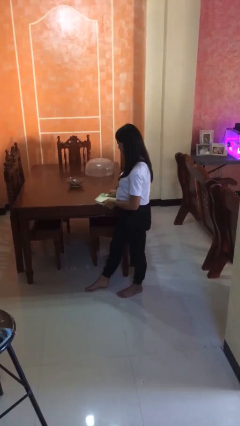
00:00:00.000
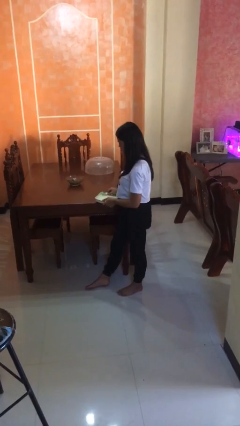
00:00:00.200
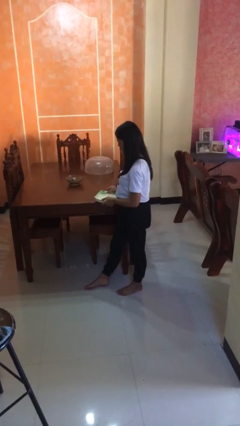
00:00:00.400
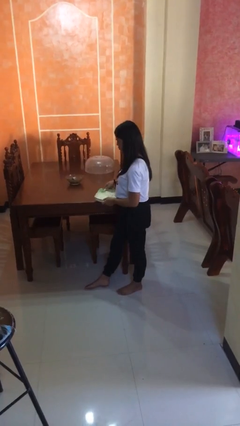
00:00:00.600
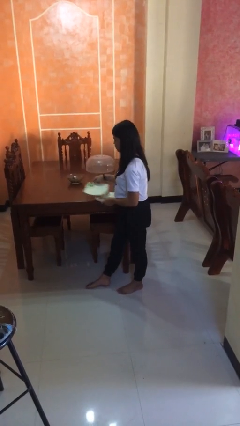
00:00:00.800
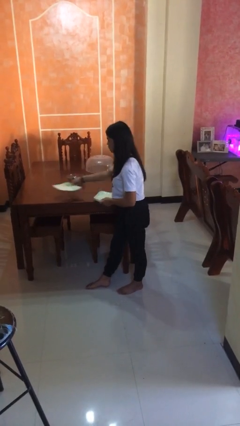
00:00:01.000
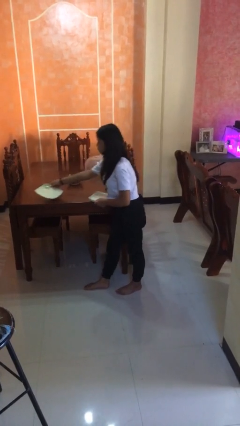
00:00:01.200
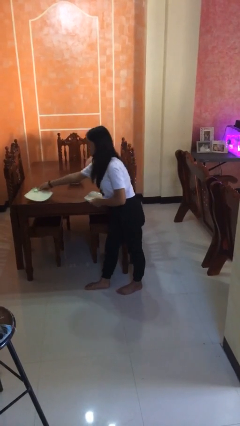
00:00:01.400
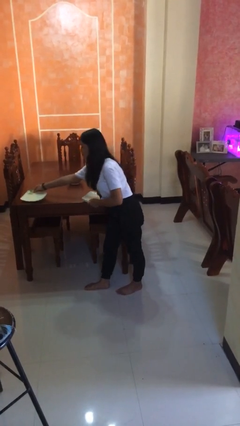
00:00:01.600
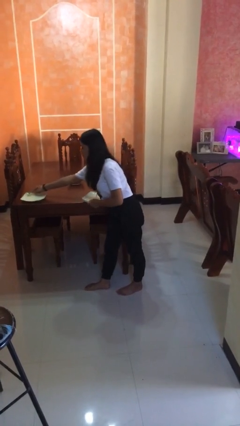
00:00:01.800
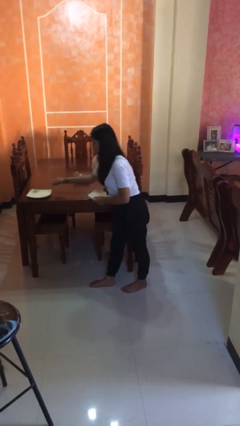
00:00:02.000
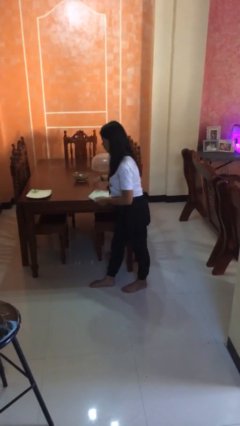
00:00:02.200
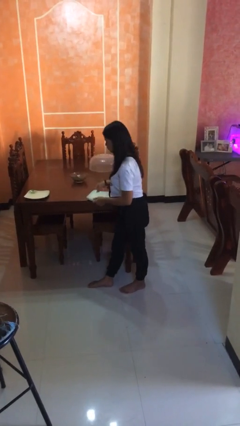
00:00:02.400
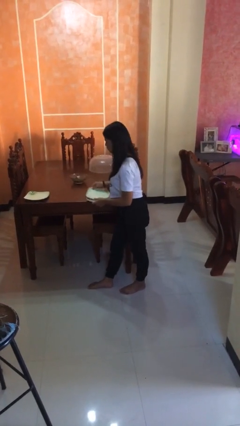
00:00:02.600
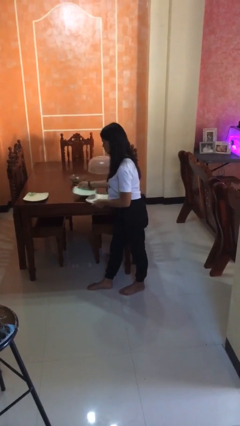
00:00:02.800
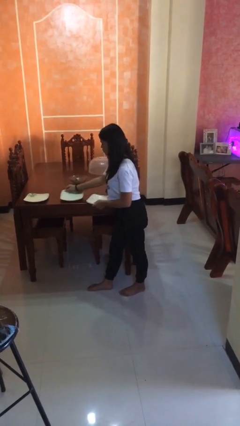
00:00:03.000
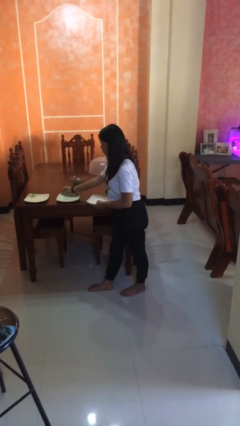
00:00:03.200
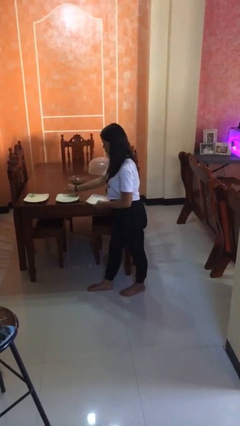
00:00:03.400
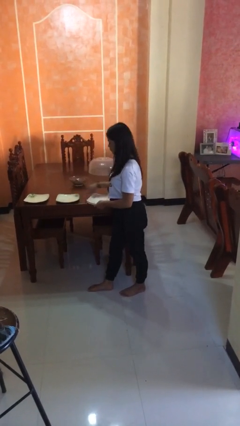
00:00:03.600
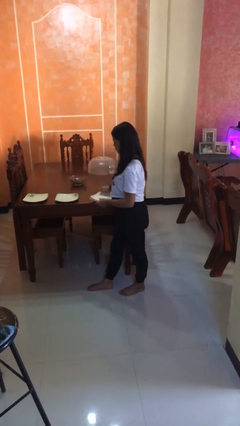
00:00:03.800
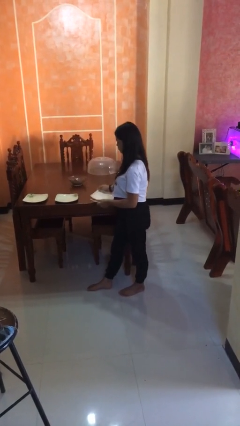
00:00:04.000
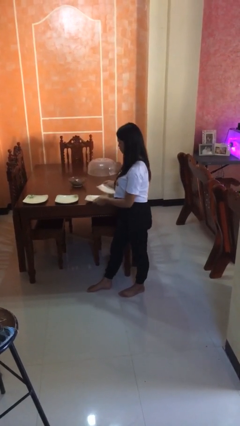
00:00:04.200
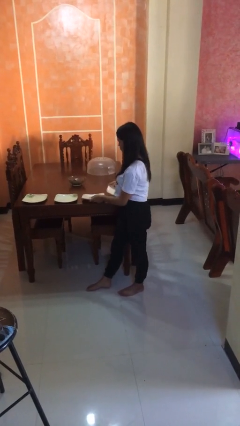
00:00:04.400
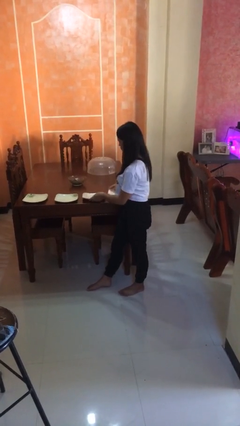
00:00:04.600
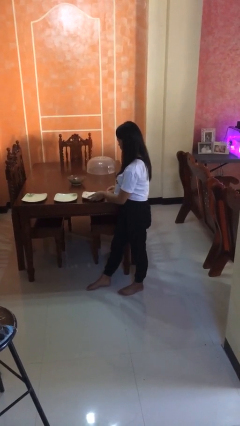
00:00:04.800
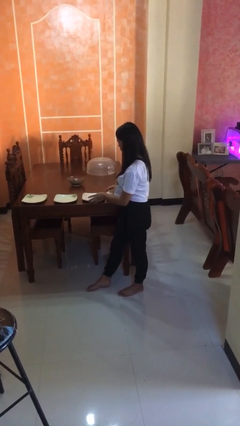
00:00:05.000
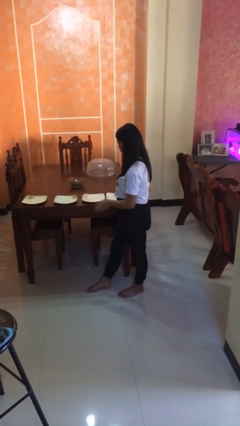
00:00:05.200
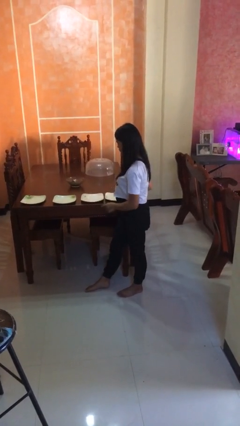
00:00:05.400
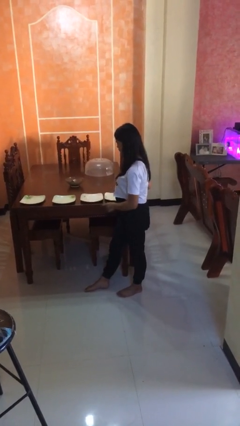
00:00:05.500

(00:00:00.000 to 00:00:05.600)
person sets table

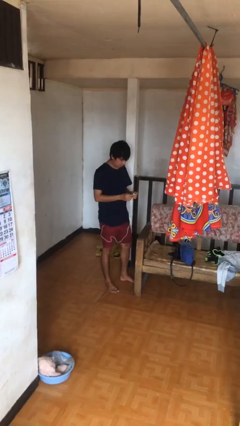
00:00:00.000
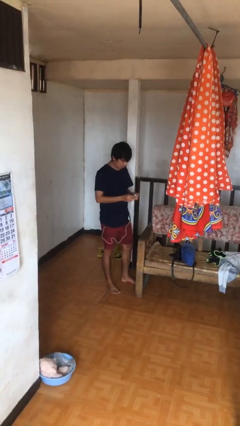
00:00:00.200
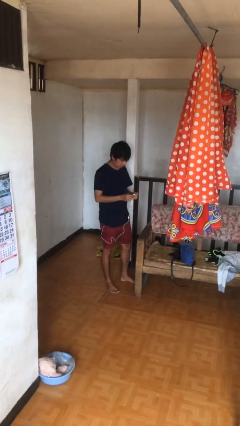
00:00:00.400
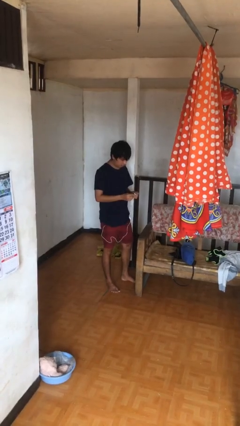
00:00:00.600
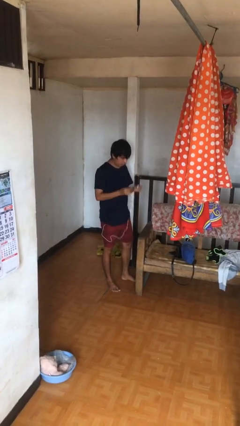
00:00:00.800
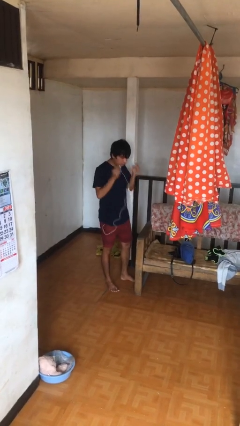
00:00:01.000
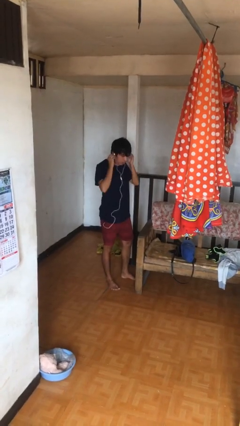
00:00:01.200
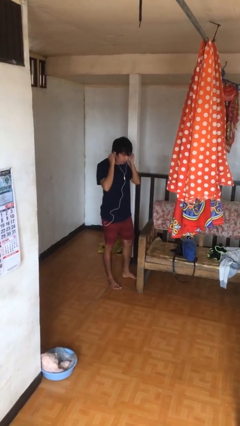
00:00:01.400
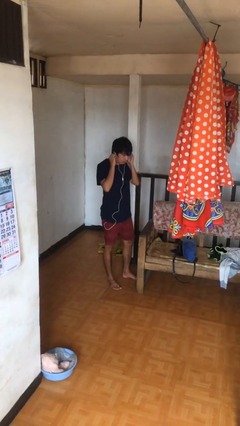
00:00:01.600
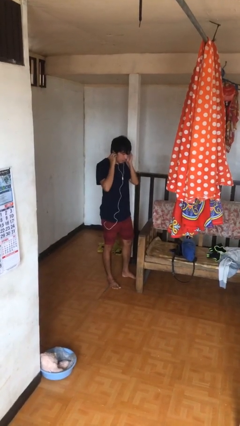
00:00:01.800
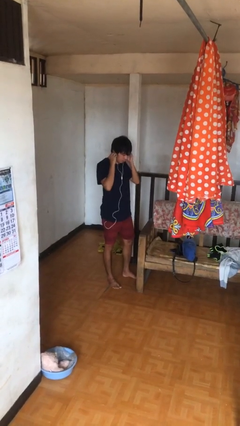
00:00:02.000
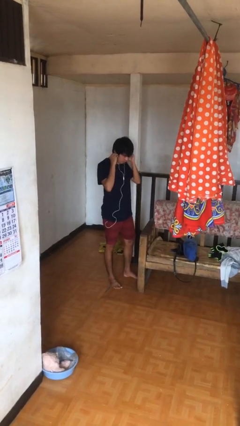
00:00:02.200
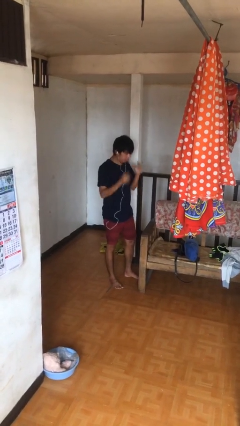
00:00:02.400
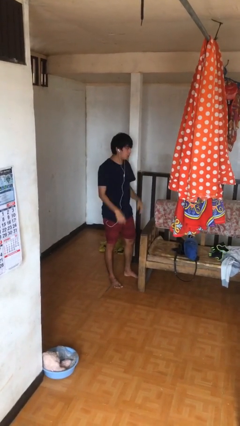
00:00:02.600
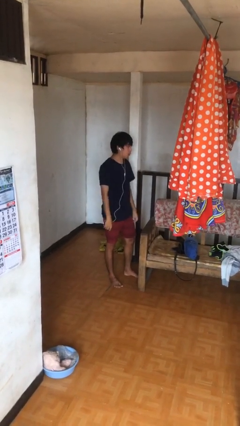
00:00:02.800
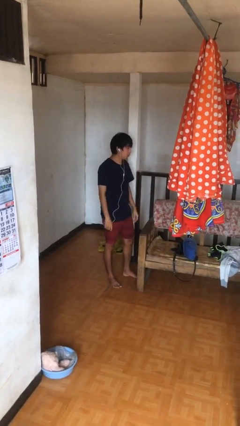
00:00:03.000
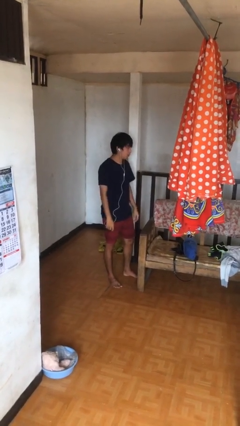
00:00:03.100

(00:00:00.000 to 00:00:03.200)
person puts on headphones

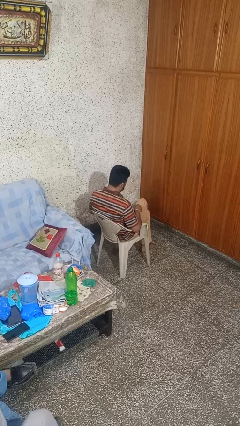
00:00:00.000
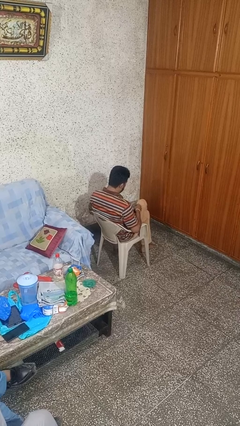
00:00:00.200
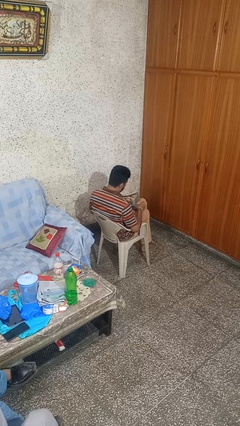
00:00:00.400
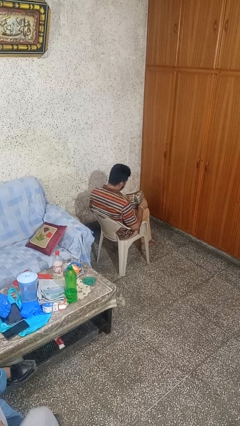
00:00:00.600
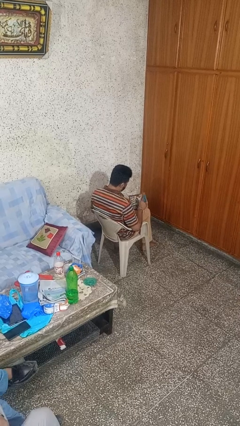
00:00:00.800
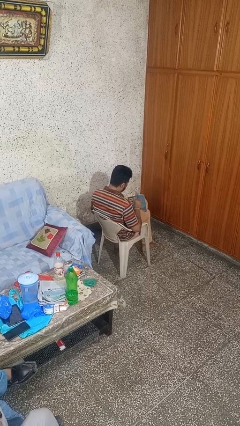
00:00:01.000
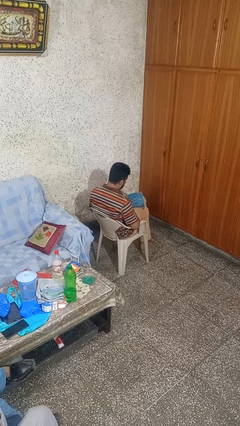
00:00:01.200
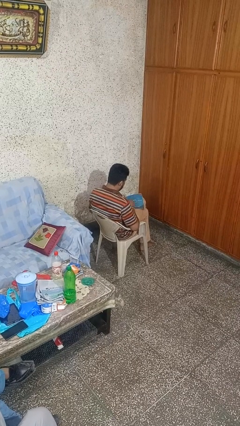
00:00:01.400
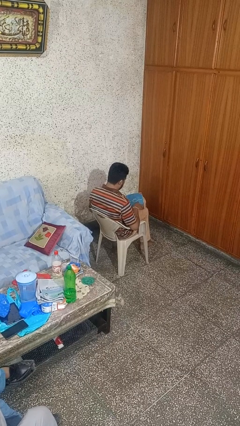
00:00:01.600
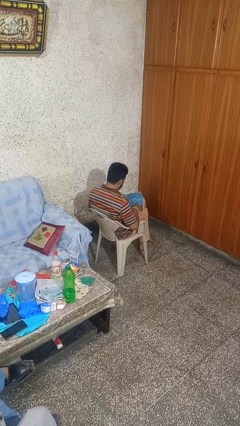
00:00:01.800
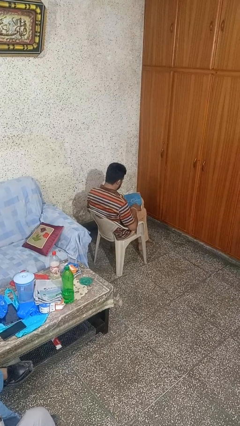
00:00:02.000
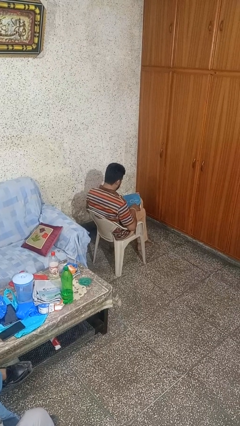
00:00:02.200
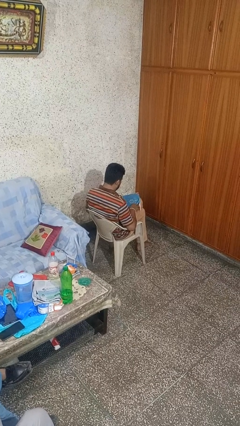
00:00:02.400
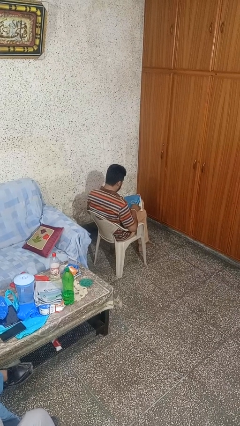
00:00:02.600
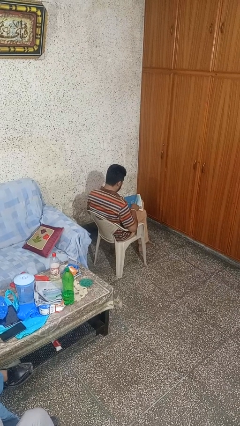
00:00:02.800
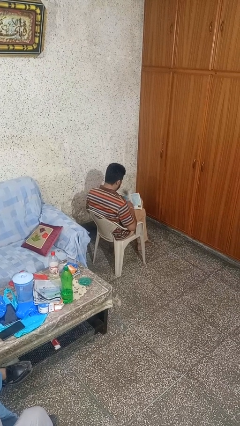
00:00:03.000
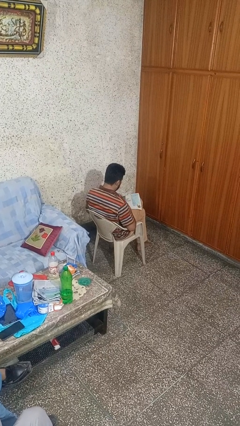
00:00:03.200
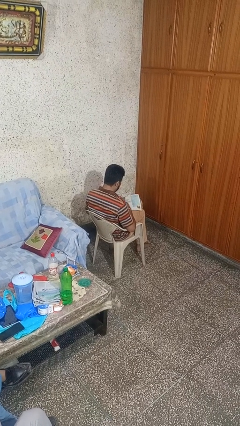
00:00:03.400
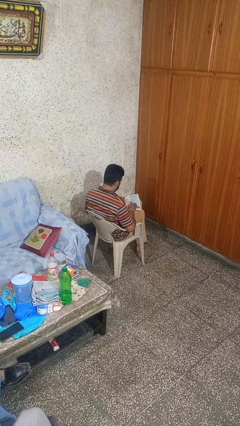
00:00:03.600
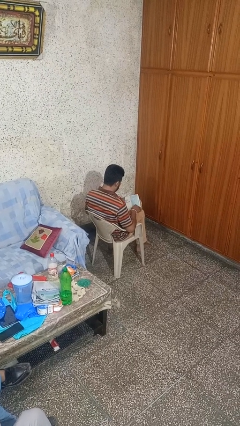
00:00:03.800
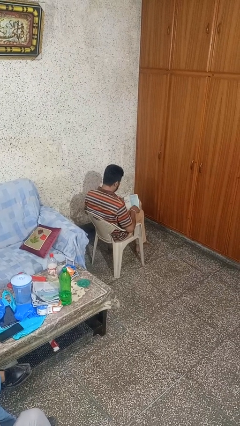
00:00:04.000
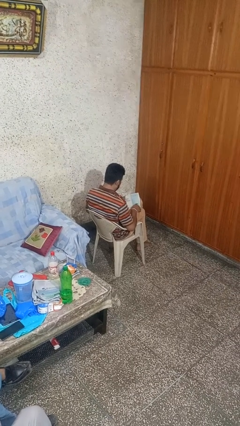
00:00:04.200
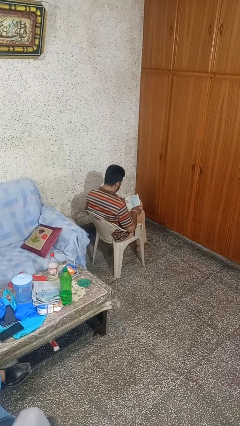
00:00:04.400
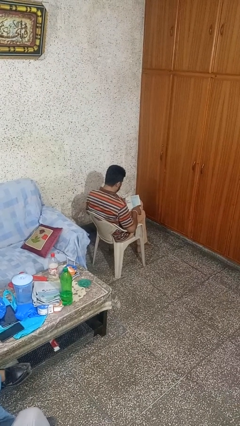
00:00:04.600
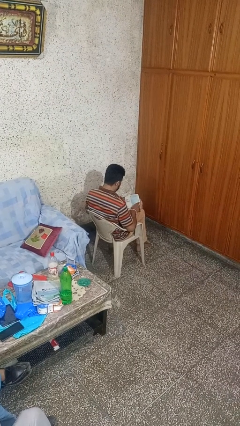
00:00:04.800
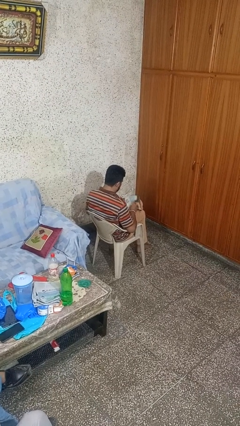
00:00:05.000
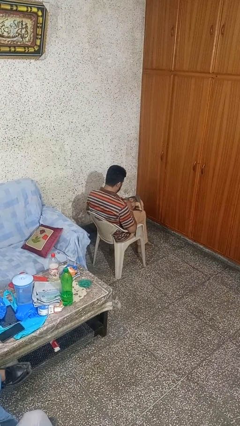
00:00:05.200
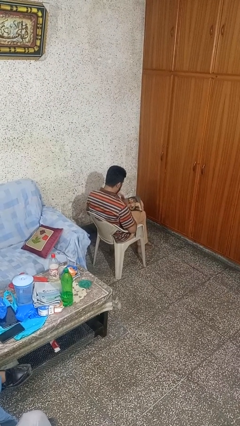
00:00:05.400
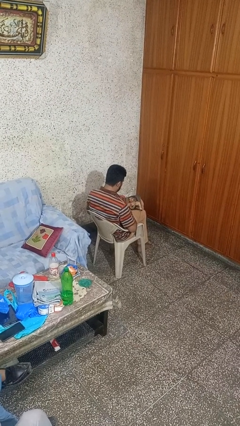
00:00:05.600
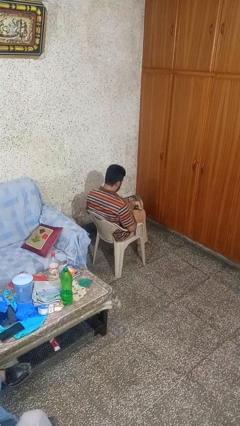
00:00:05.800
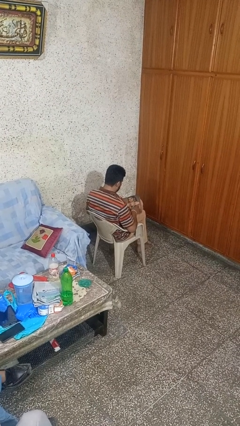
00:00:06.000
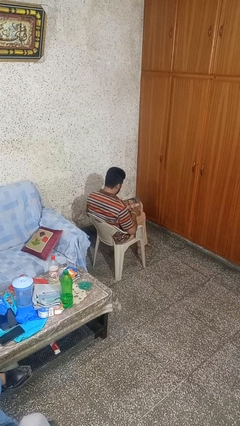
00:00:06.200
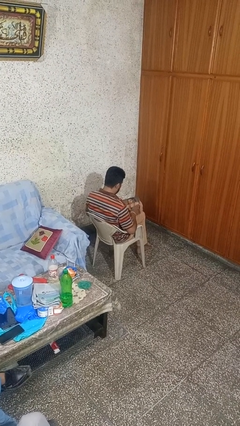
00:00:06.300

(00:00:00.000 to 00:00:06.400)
person reads magazine

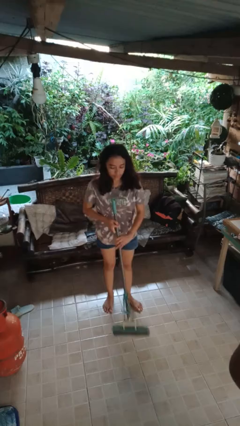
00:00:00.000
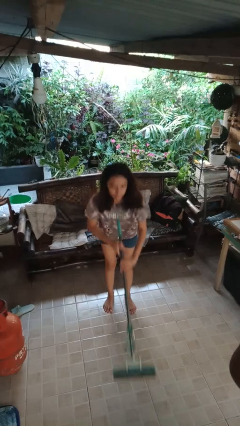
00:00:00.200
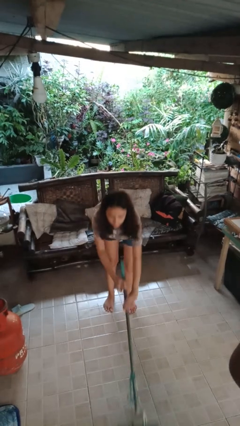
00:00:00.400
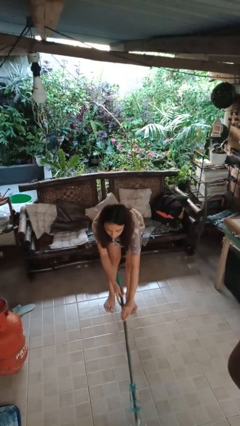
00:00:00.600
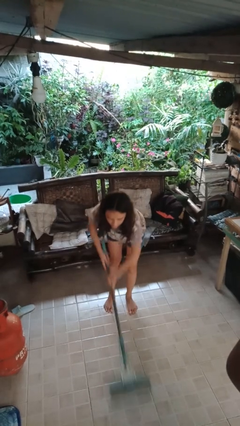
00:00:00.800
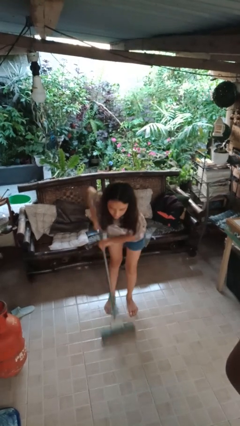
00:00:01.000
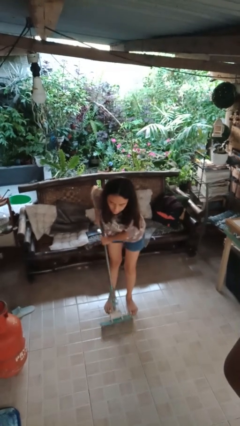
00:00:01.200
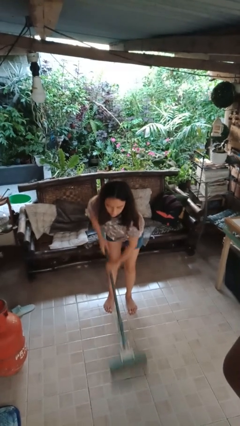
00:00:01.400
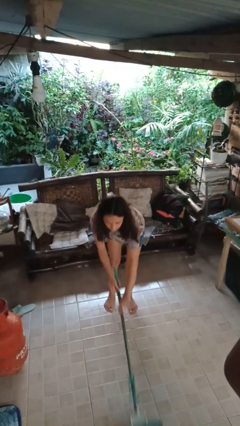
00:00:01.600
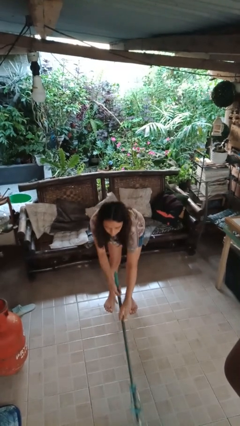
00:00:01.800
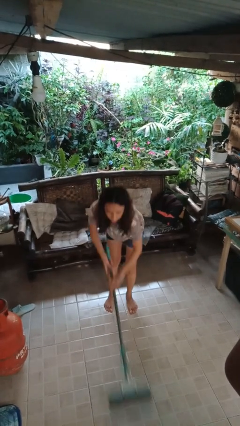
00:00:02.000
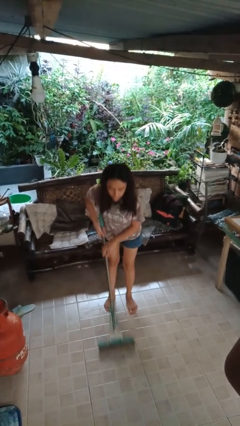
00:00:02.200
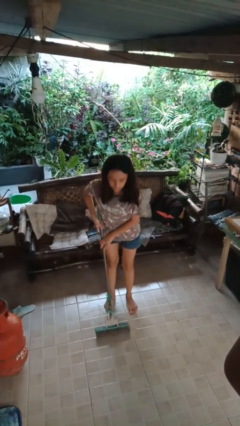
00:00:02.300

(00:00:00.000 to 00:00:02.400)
person mops
